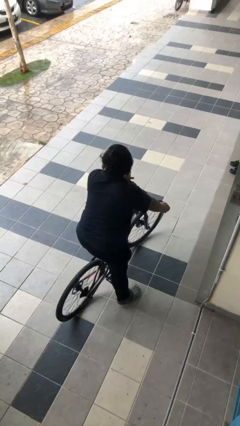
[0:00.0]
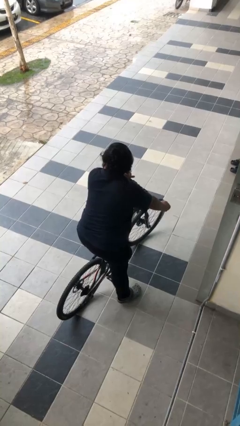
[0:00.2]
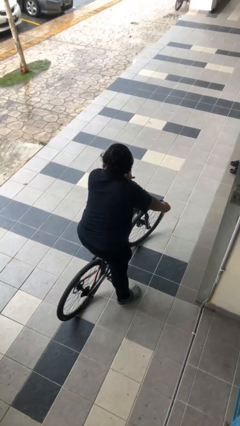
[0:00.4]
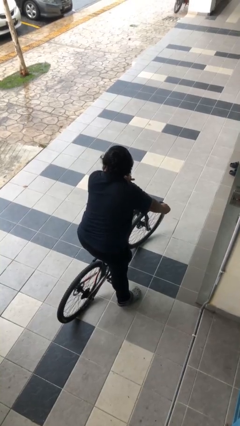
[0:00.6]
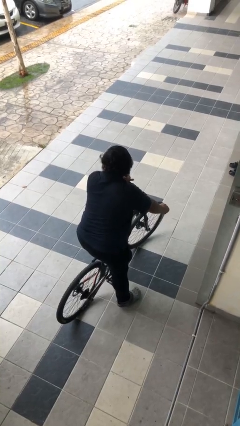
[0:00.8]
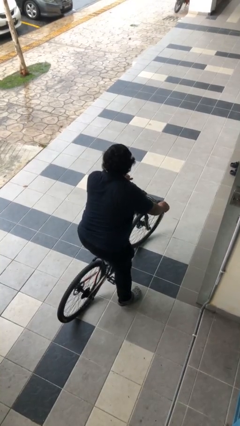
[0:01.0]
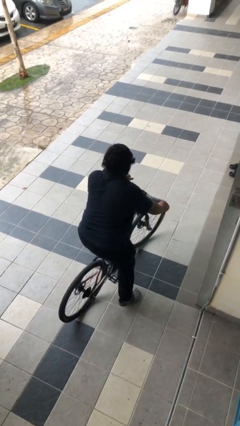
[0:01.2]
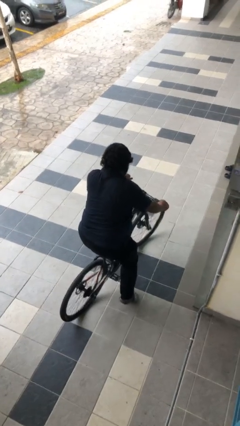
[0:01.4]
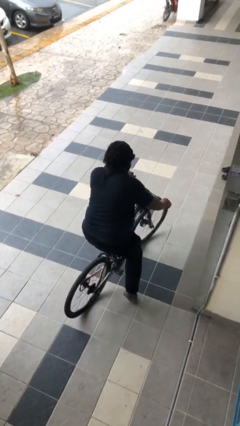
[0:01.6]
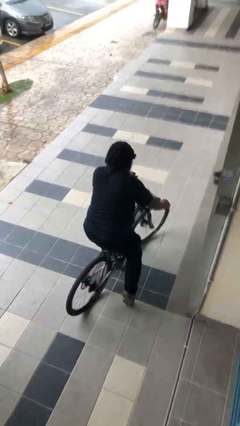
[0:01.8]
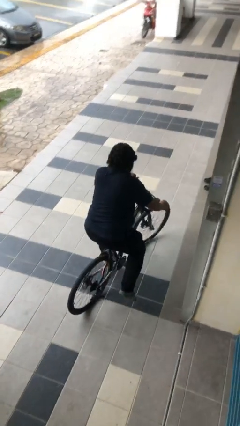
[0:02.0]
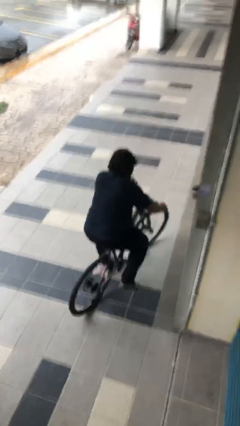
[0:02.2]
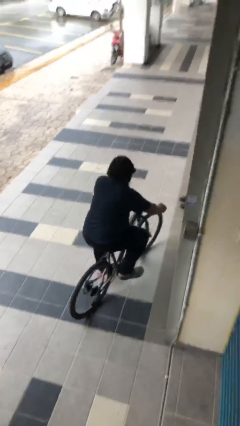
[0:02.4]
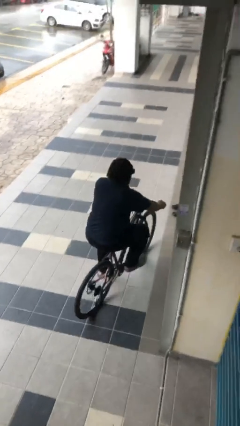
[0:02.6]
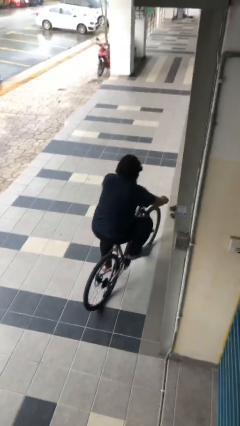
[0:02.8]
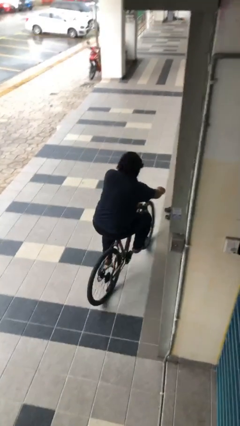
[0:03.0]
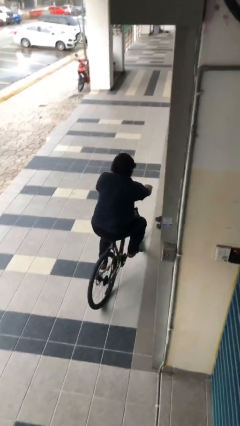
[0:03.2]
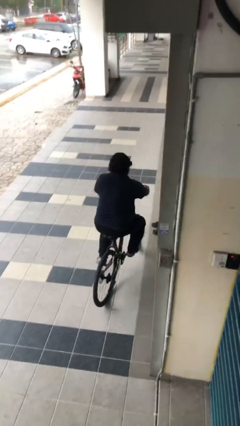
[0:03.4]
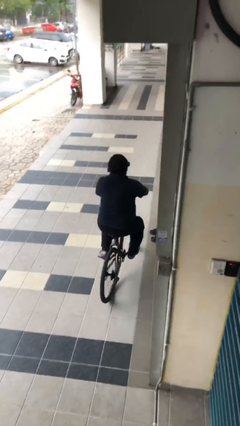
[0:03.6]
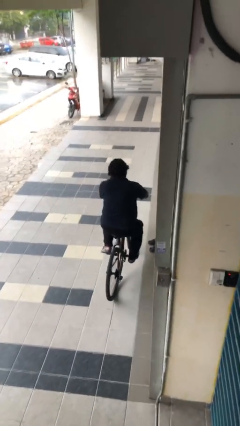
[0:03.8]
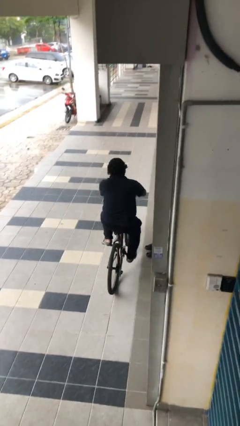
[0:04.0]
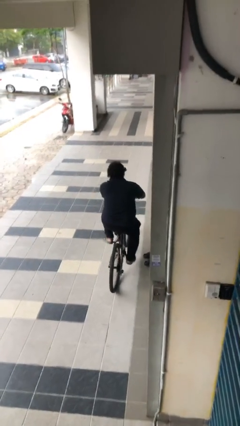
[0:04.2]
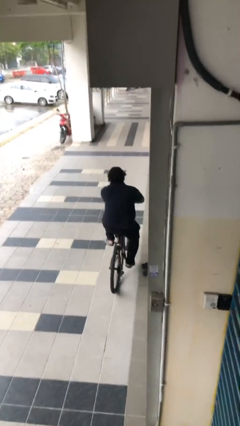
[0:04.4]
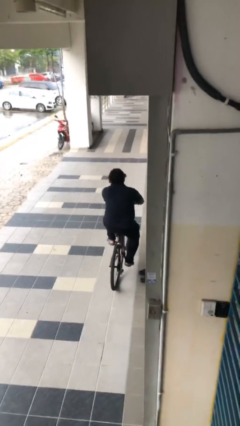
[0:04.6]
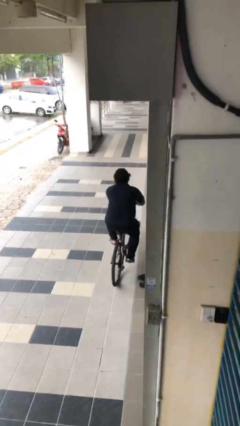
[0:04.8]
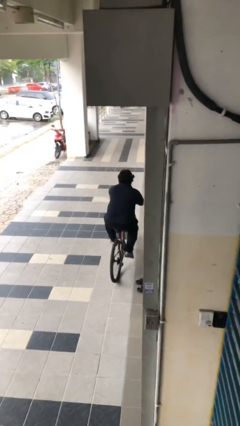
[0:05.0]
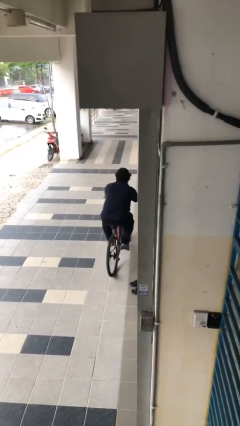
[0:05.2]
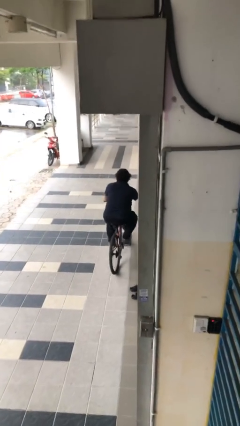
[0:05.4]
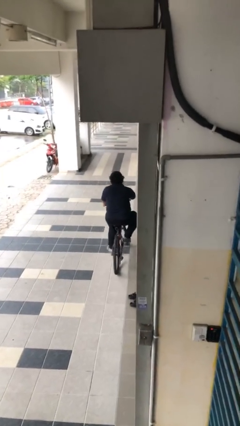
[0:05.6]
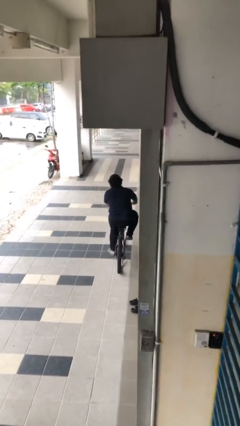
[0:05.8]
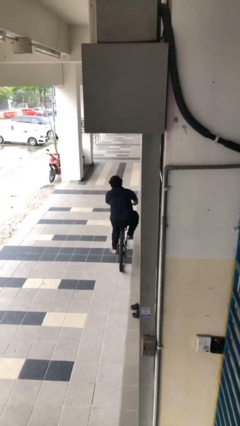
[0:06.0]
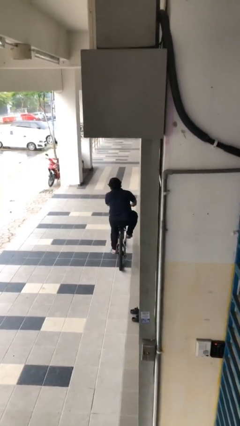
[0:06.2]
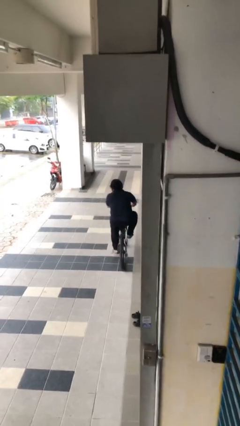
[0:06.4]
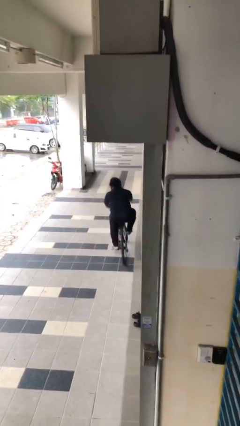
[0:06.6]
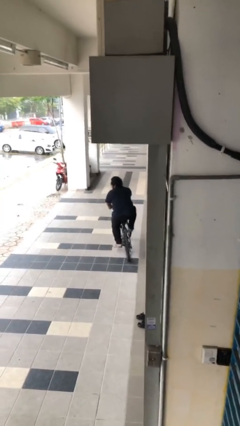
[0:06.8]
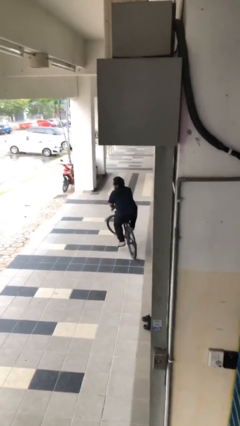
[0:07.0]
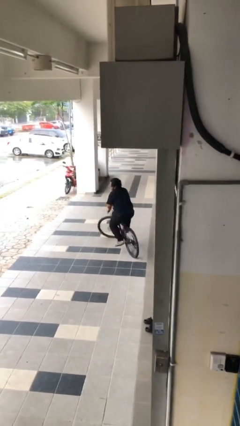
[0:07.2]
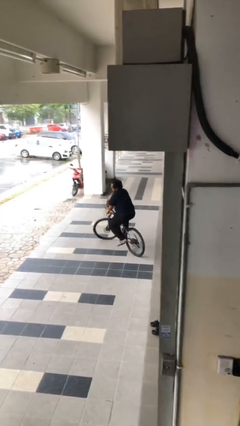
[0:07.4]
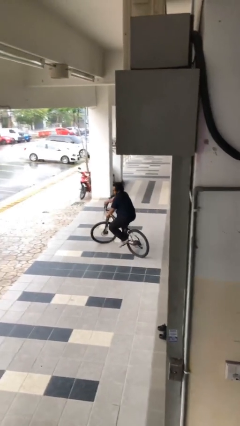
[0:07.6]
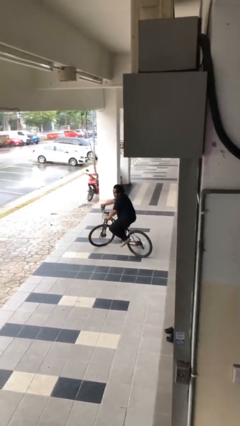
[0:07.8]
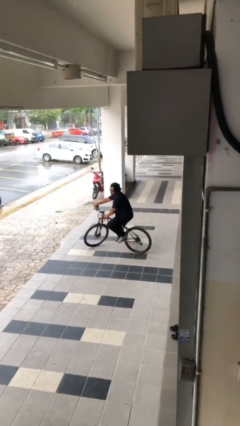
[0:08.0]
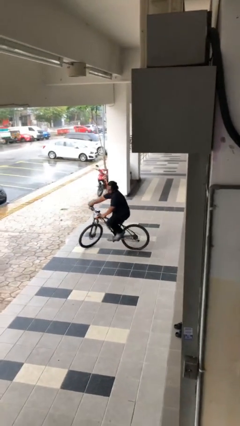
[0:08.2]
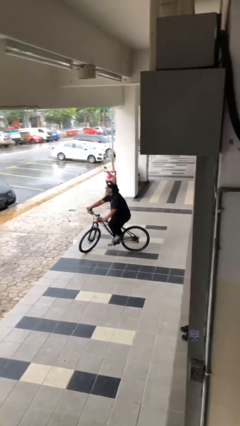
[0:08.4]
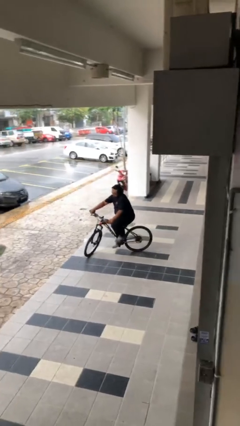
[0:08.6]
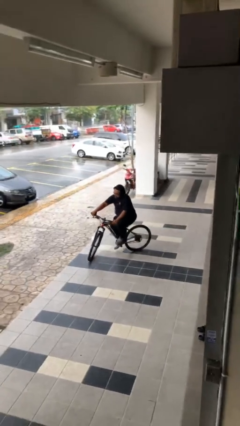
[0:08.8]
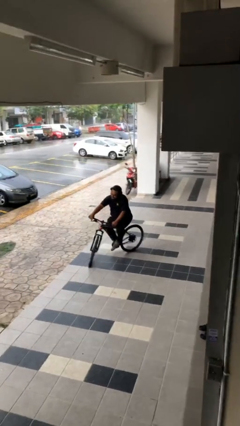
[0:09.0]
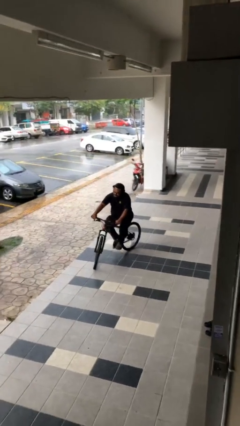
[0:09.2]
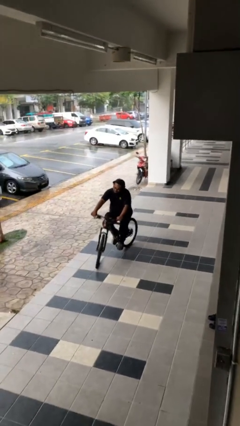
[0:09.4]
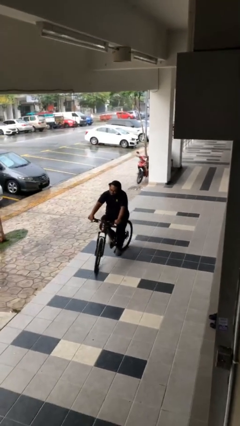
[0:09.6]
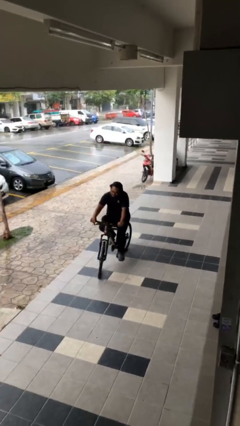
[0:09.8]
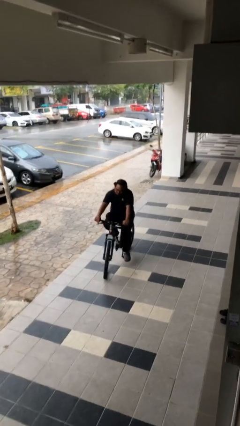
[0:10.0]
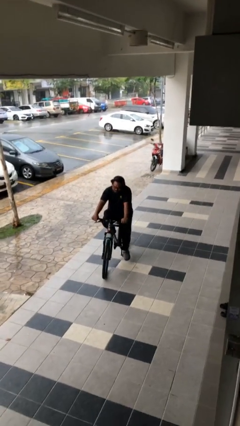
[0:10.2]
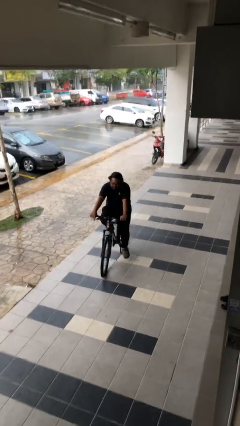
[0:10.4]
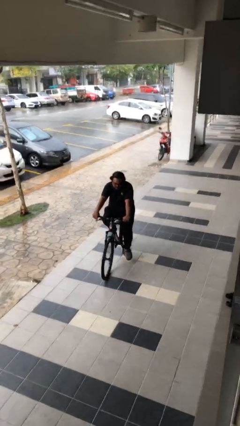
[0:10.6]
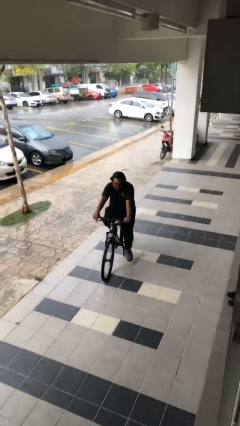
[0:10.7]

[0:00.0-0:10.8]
person rides bicycle

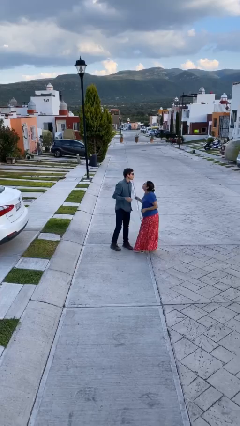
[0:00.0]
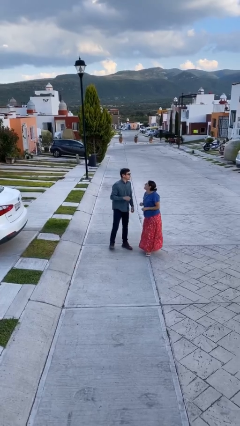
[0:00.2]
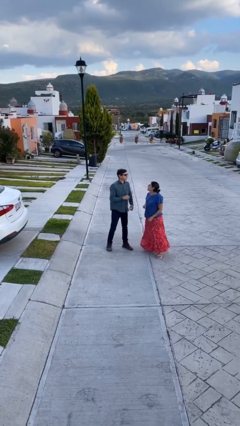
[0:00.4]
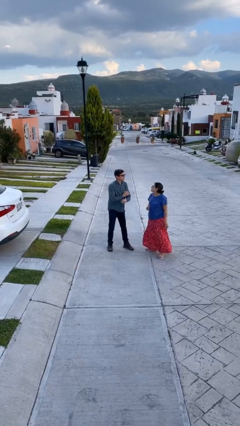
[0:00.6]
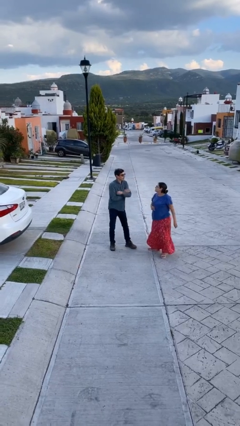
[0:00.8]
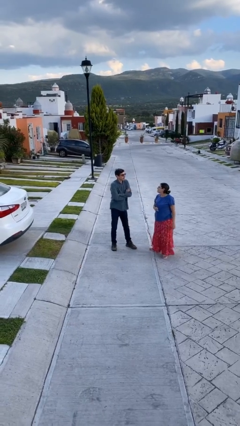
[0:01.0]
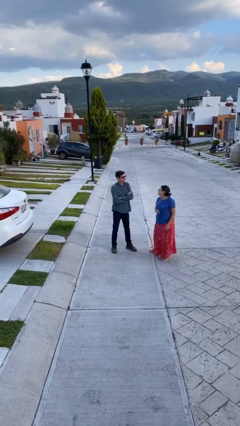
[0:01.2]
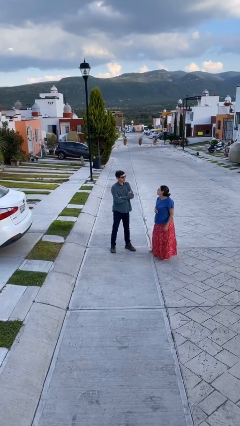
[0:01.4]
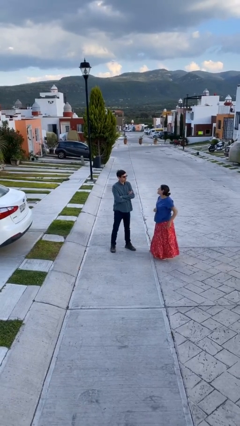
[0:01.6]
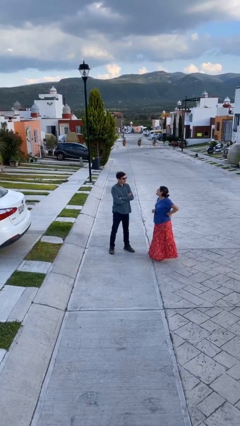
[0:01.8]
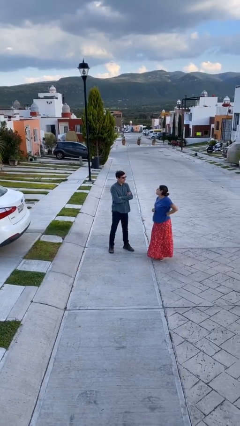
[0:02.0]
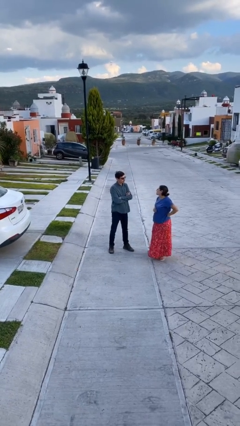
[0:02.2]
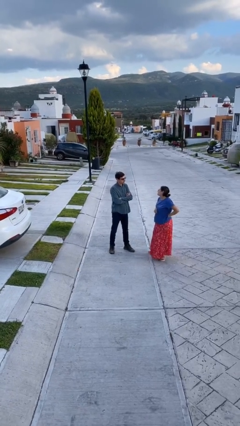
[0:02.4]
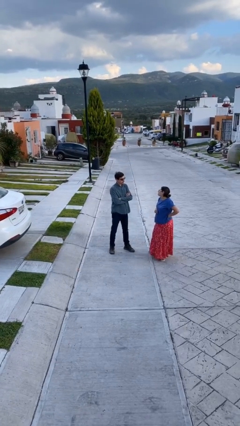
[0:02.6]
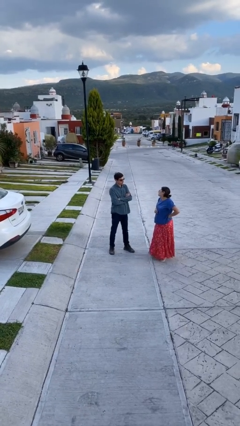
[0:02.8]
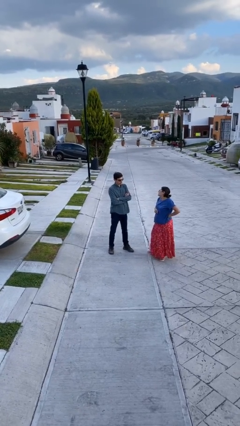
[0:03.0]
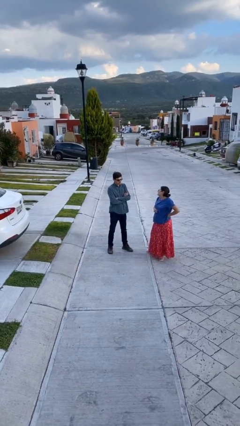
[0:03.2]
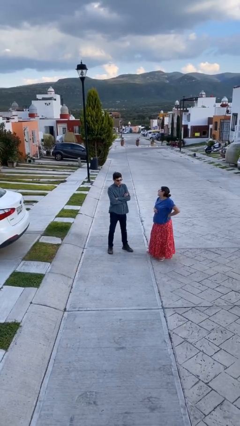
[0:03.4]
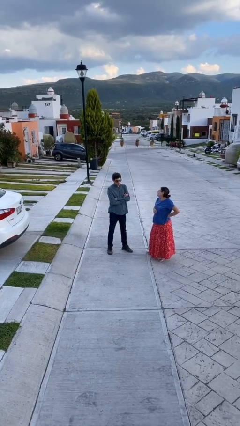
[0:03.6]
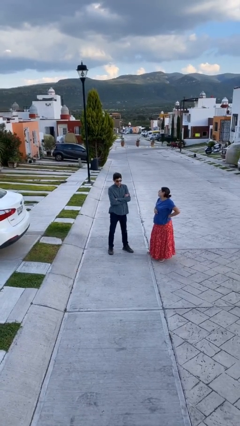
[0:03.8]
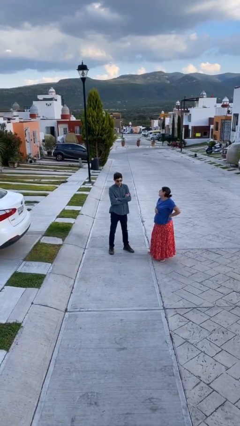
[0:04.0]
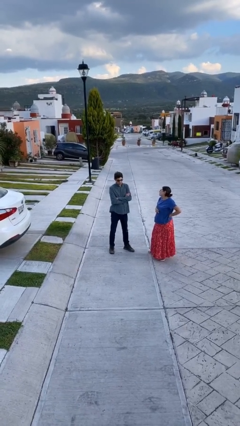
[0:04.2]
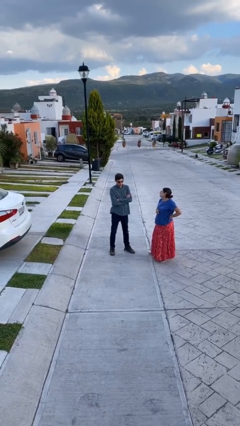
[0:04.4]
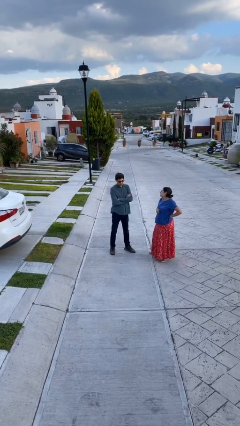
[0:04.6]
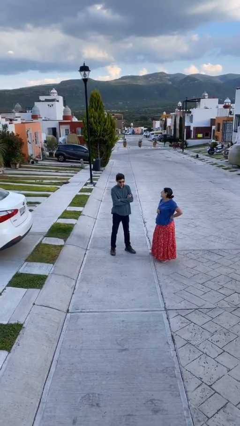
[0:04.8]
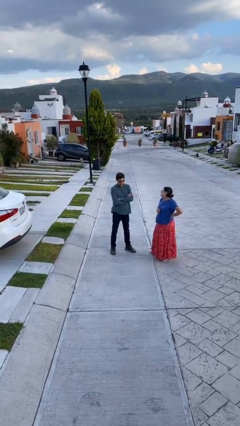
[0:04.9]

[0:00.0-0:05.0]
person talks to person

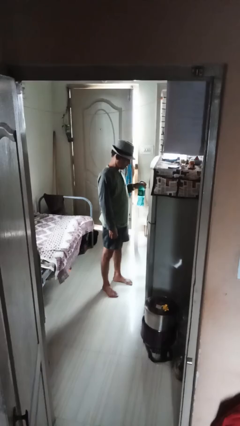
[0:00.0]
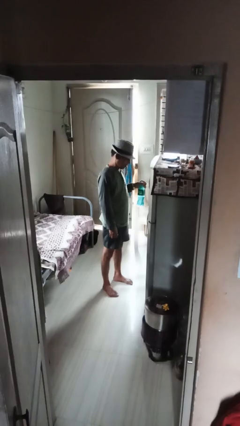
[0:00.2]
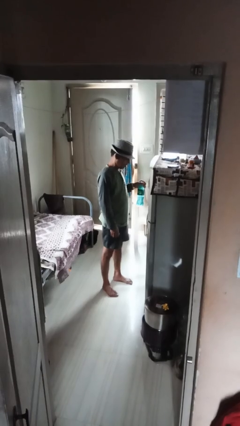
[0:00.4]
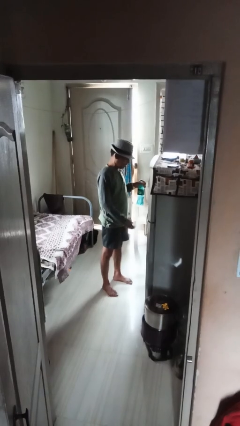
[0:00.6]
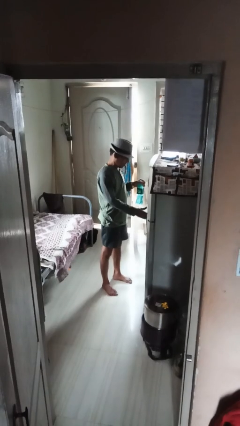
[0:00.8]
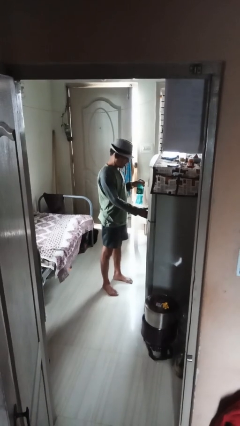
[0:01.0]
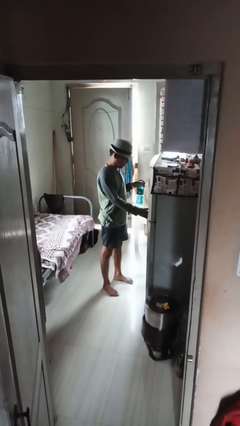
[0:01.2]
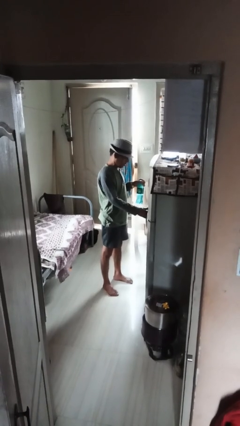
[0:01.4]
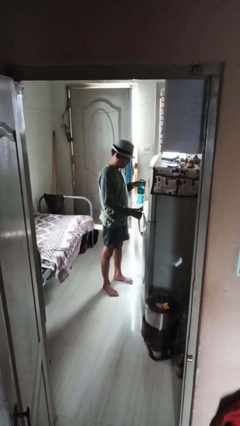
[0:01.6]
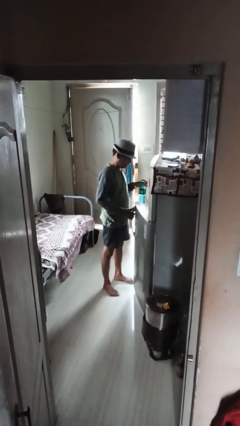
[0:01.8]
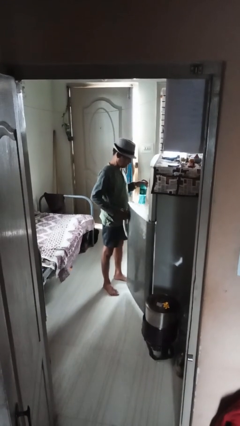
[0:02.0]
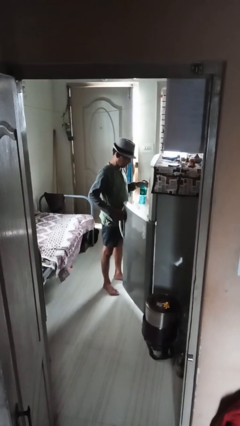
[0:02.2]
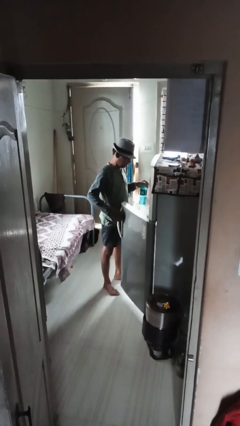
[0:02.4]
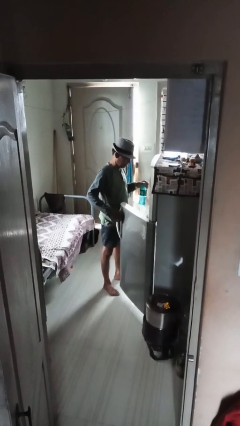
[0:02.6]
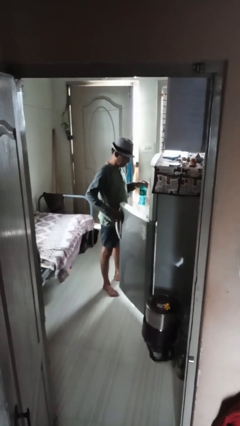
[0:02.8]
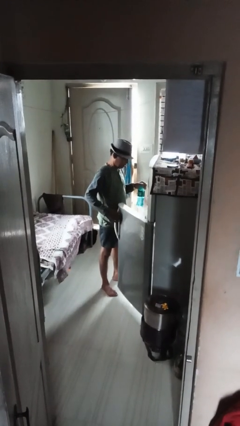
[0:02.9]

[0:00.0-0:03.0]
person opens refrigerator
